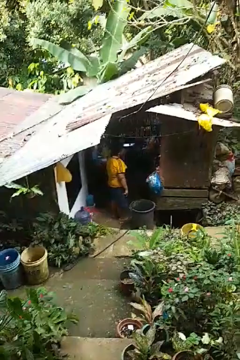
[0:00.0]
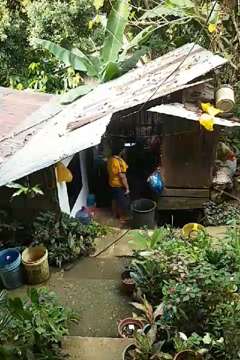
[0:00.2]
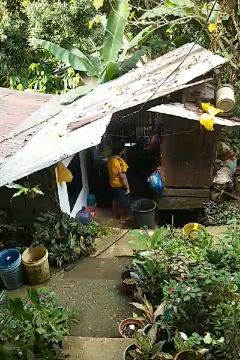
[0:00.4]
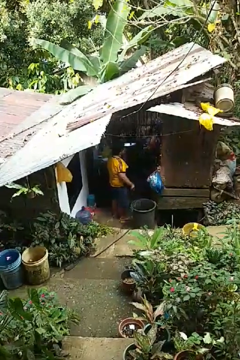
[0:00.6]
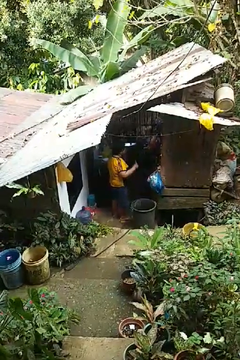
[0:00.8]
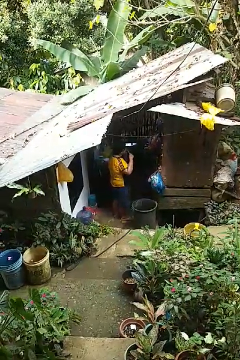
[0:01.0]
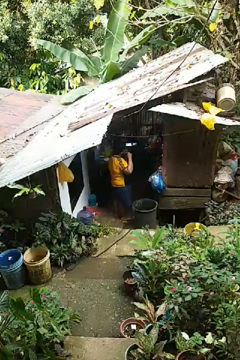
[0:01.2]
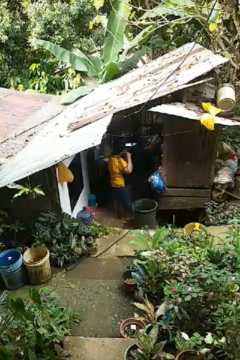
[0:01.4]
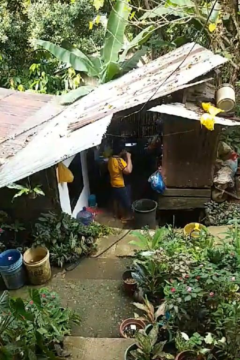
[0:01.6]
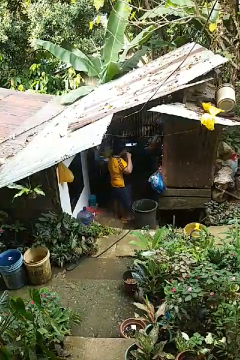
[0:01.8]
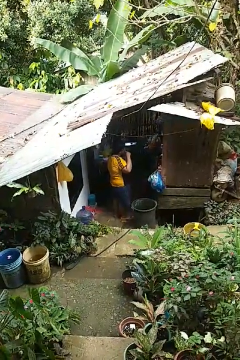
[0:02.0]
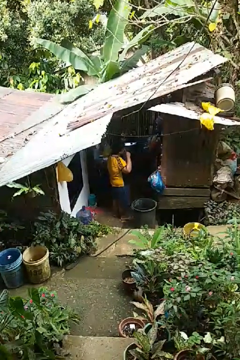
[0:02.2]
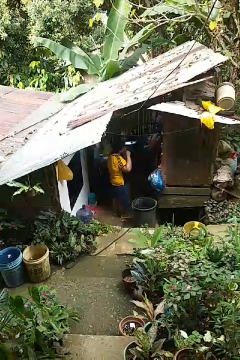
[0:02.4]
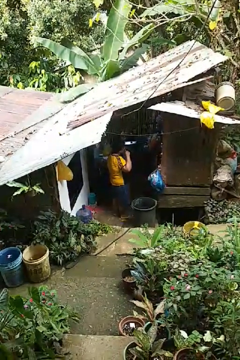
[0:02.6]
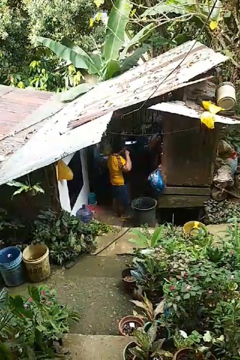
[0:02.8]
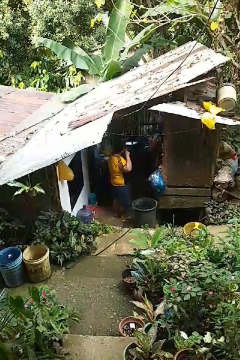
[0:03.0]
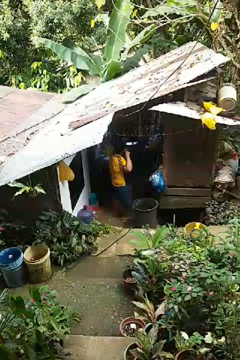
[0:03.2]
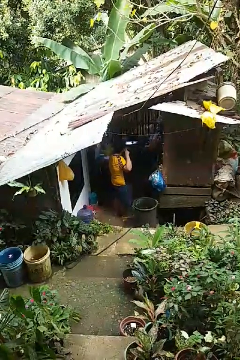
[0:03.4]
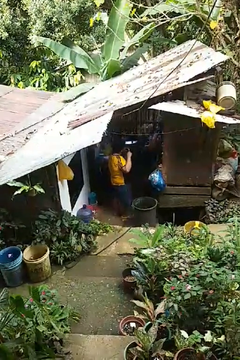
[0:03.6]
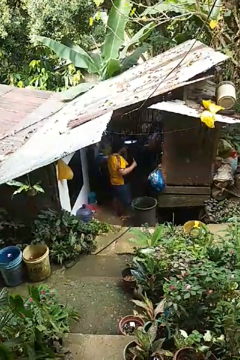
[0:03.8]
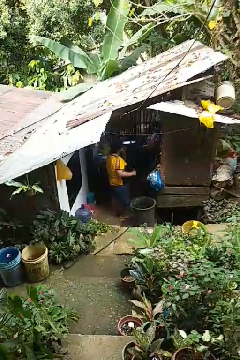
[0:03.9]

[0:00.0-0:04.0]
person brushes teeth

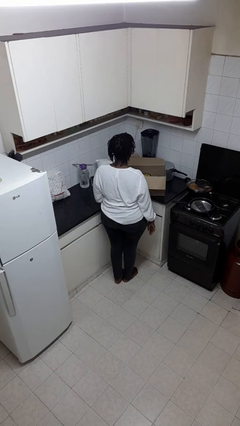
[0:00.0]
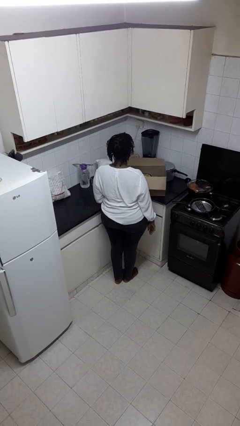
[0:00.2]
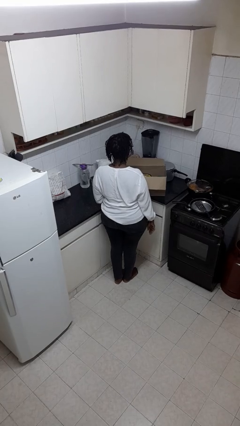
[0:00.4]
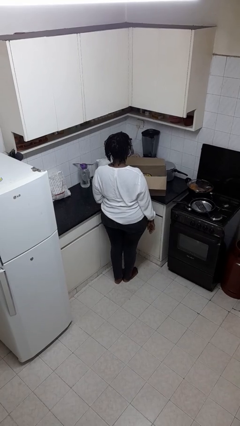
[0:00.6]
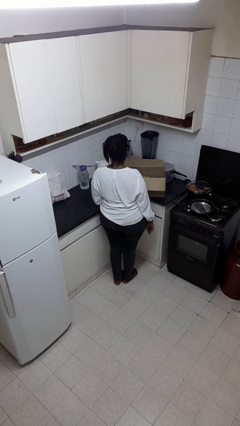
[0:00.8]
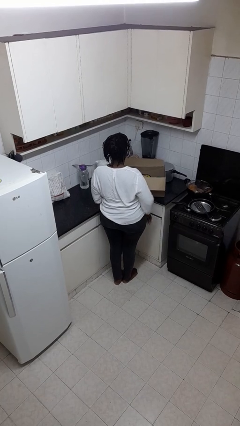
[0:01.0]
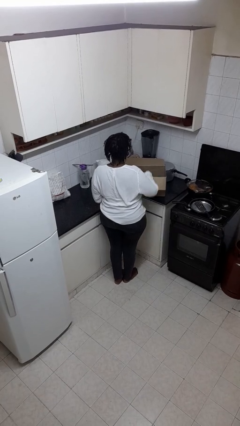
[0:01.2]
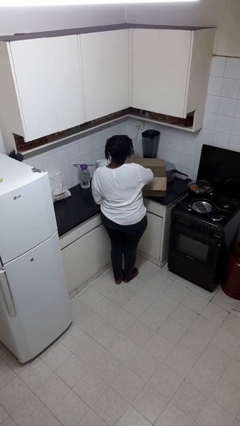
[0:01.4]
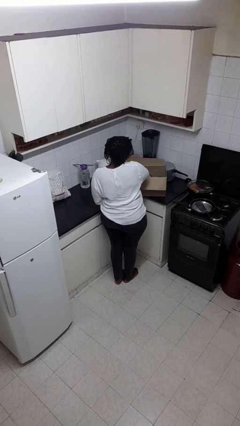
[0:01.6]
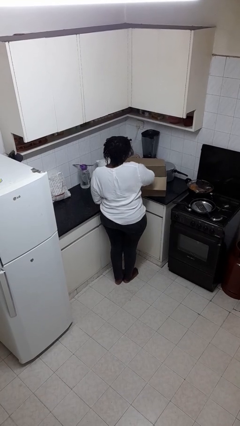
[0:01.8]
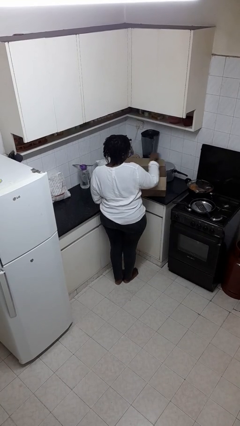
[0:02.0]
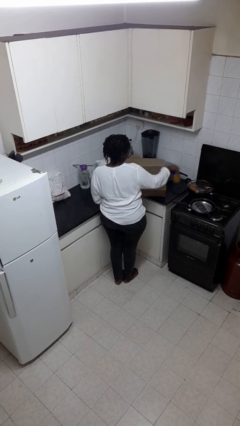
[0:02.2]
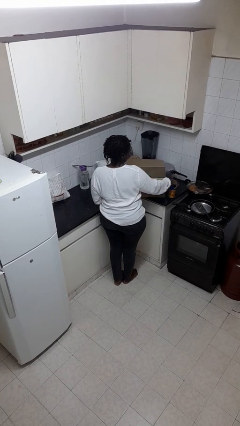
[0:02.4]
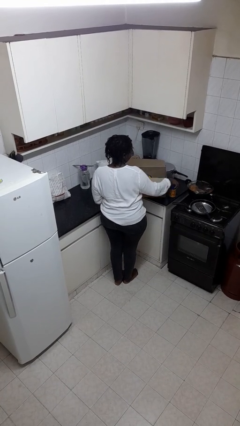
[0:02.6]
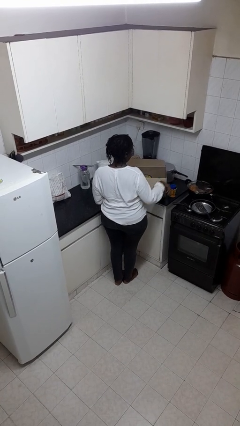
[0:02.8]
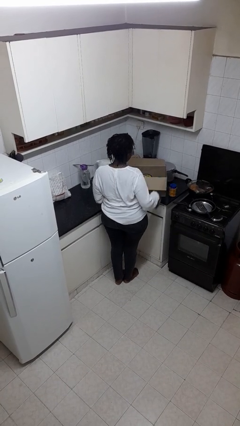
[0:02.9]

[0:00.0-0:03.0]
person takes object from box

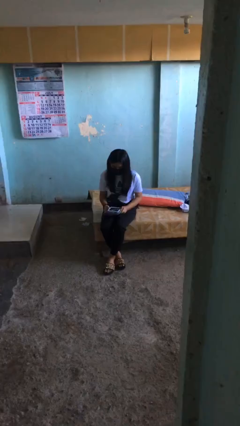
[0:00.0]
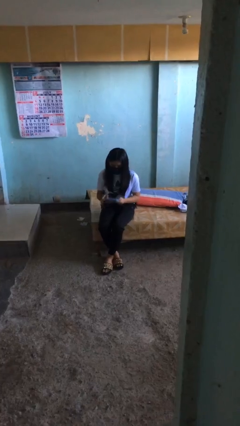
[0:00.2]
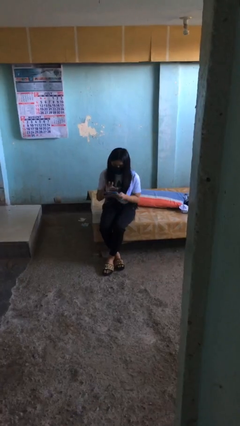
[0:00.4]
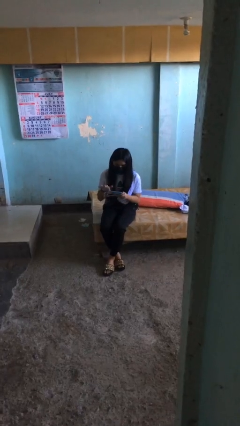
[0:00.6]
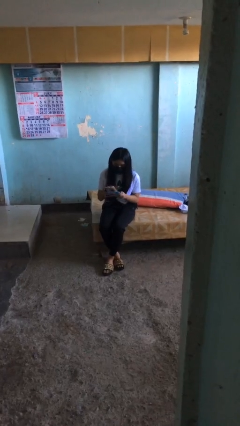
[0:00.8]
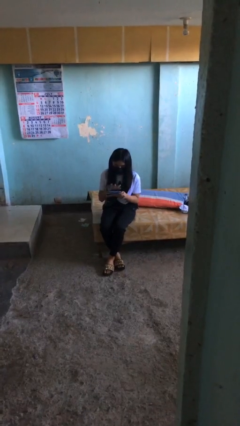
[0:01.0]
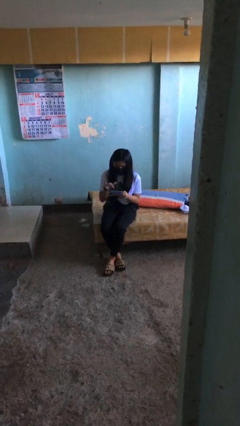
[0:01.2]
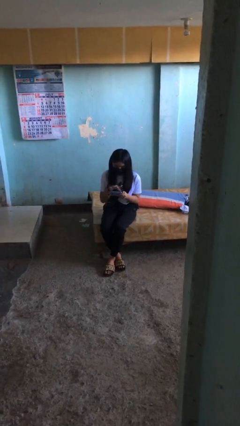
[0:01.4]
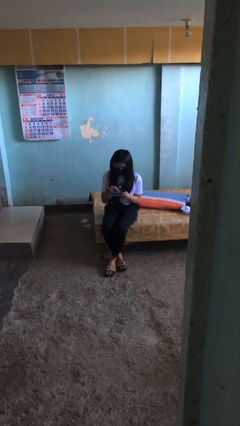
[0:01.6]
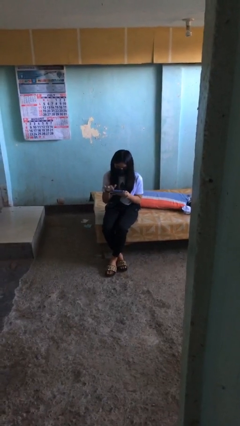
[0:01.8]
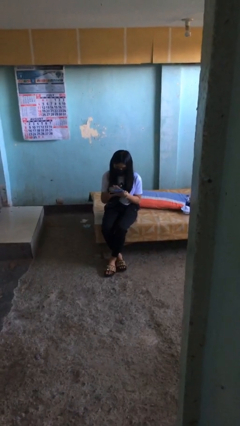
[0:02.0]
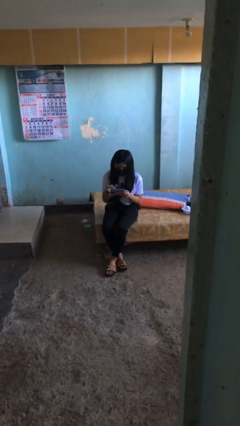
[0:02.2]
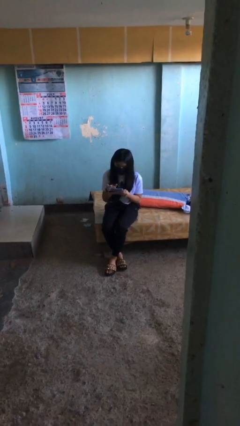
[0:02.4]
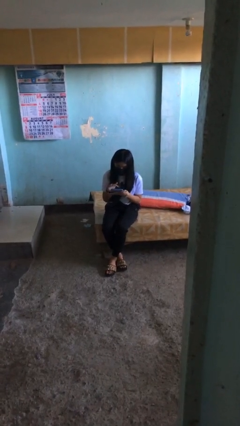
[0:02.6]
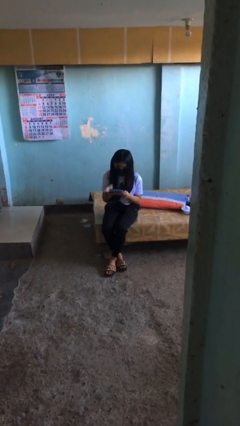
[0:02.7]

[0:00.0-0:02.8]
person interacts with tablet

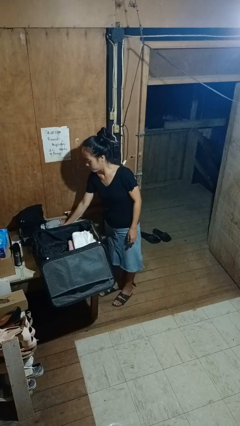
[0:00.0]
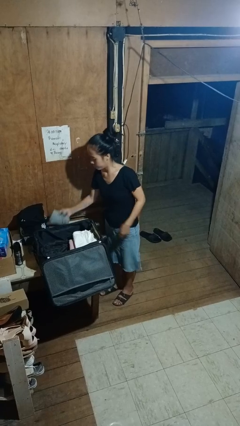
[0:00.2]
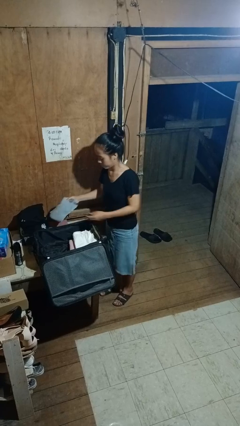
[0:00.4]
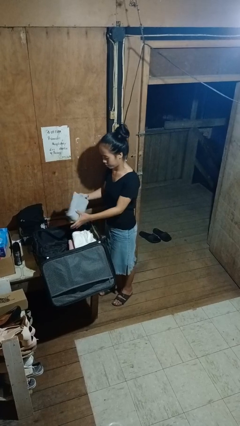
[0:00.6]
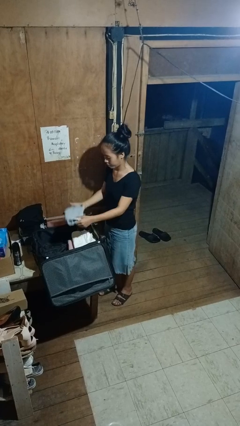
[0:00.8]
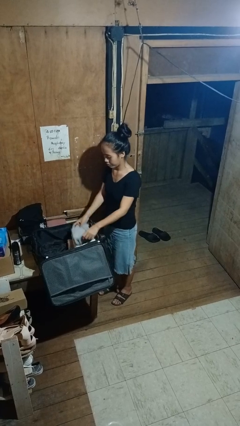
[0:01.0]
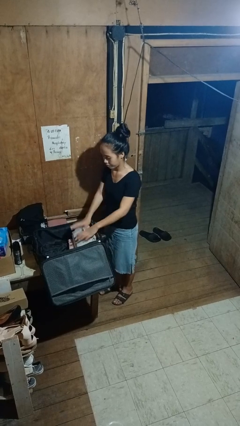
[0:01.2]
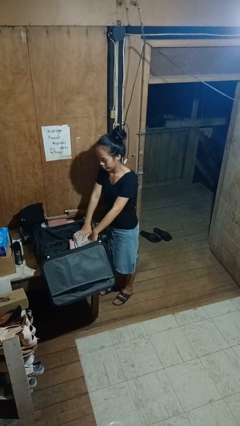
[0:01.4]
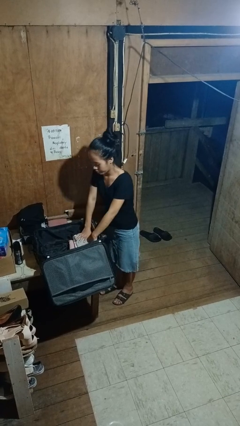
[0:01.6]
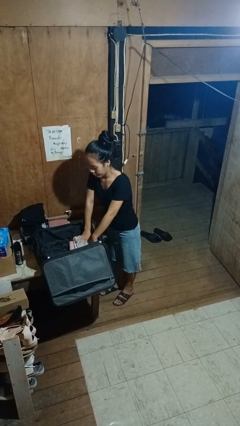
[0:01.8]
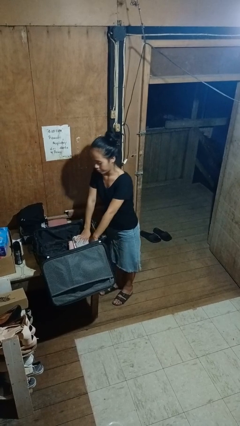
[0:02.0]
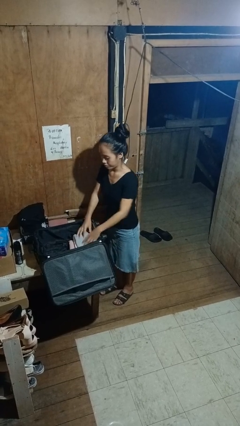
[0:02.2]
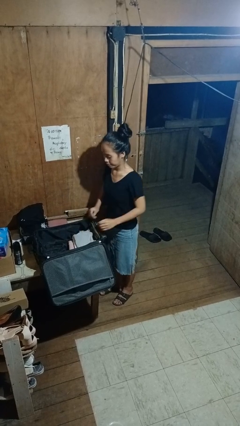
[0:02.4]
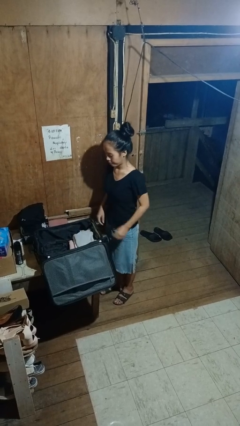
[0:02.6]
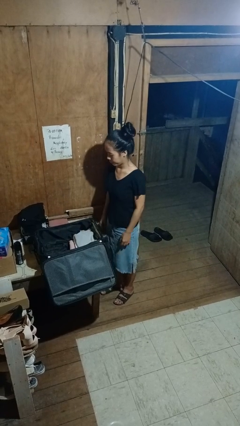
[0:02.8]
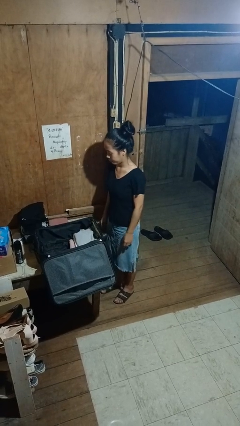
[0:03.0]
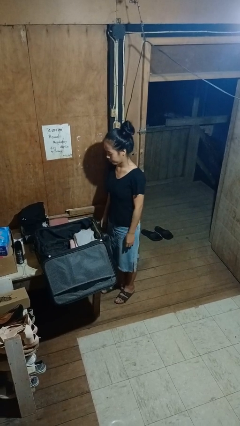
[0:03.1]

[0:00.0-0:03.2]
person loads clothes into suitcase

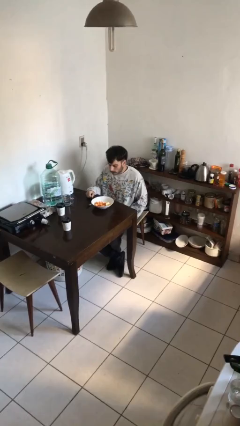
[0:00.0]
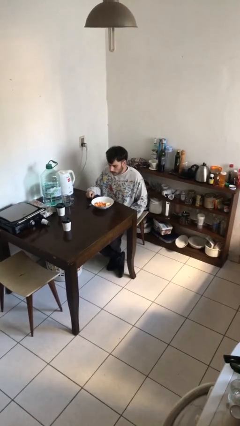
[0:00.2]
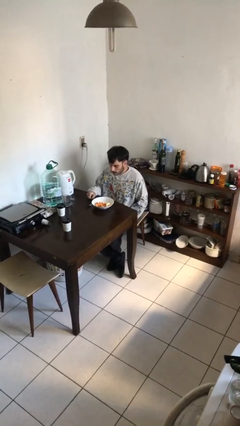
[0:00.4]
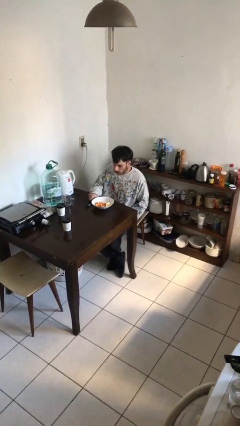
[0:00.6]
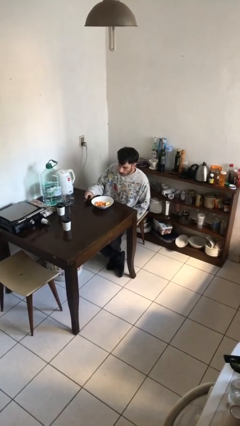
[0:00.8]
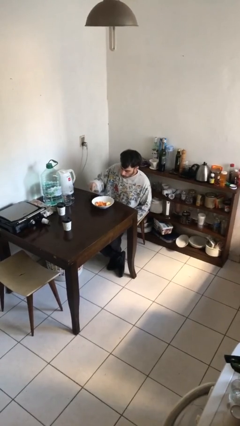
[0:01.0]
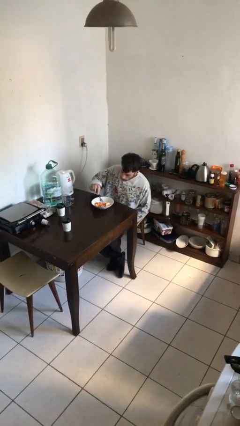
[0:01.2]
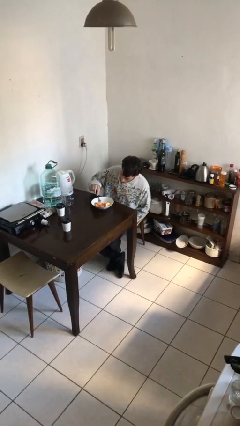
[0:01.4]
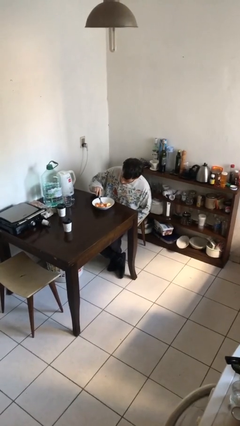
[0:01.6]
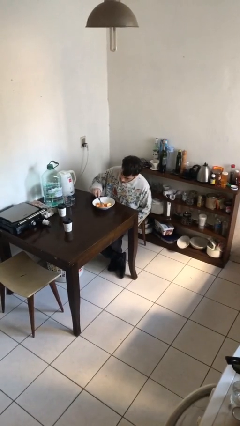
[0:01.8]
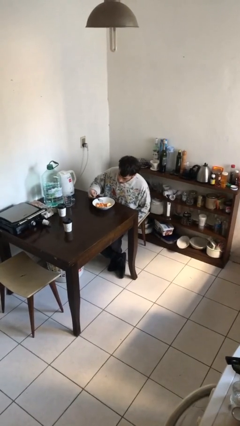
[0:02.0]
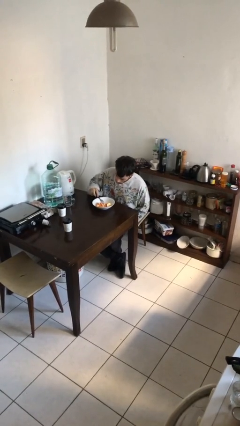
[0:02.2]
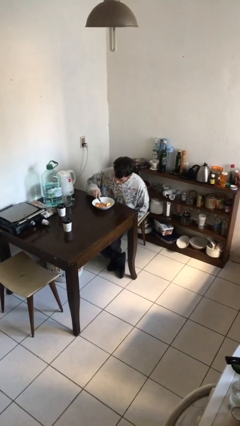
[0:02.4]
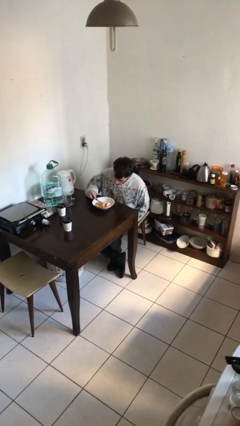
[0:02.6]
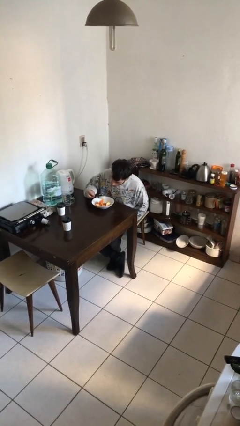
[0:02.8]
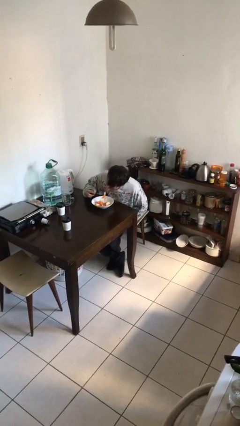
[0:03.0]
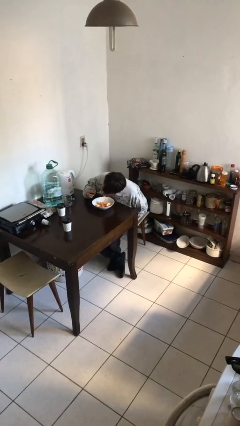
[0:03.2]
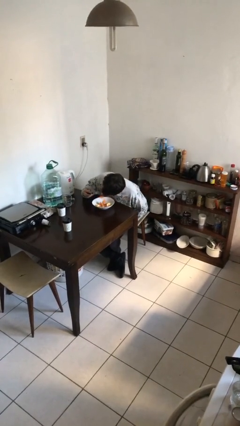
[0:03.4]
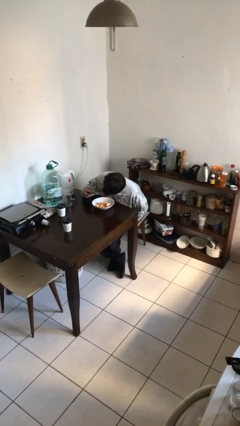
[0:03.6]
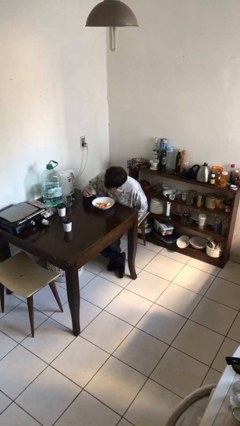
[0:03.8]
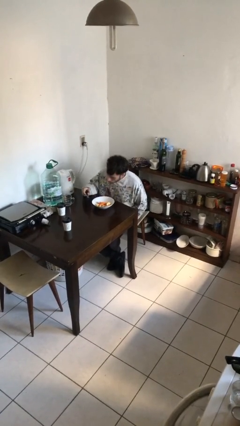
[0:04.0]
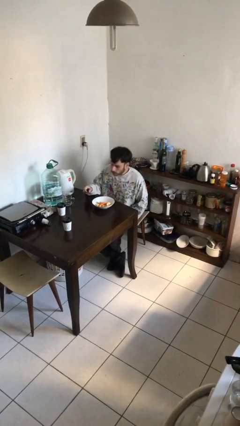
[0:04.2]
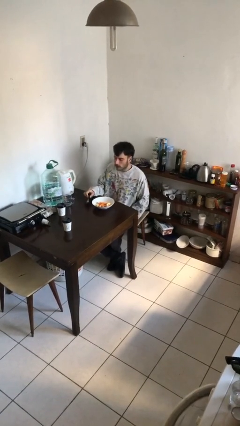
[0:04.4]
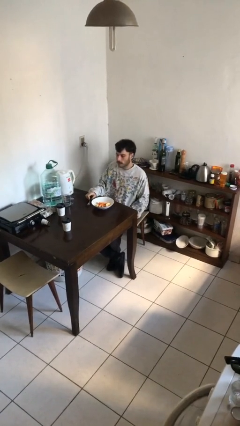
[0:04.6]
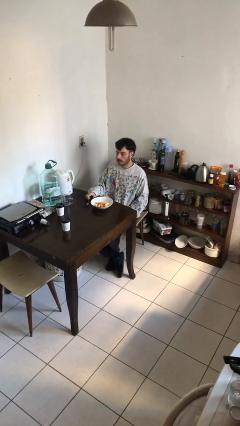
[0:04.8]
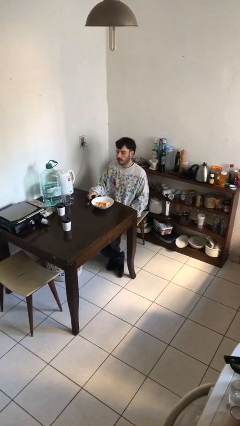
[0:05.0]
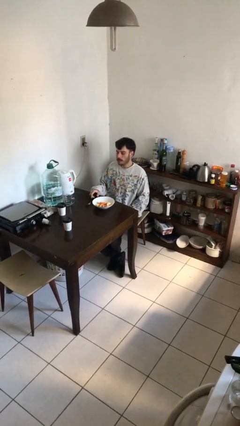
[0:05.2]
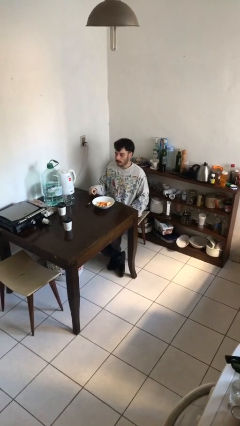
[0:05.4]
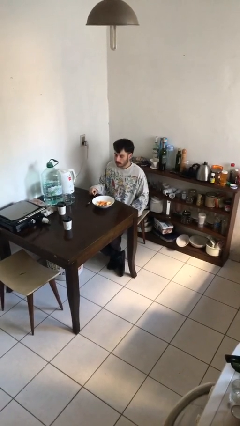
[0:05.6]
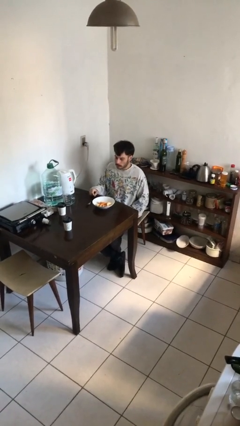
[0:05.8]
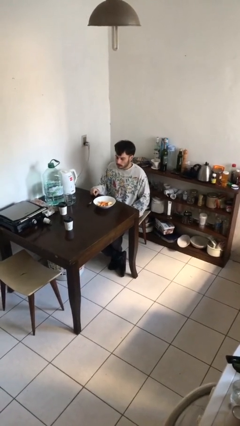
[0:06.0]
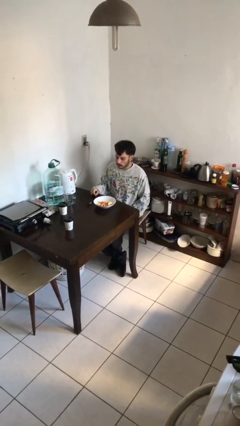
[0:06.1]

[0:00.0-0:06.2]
person eats with utensil
